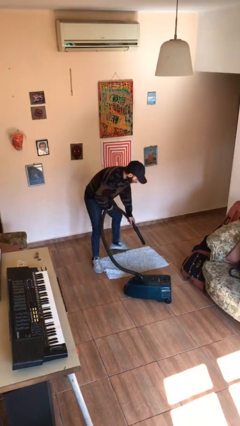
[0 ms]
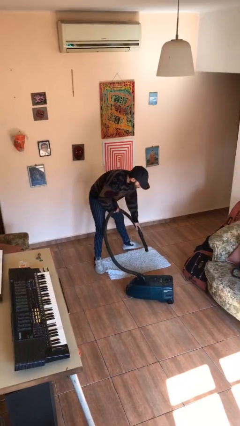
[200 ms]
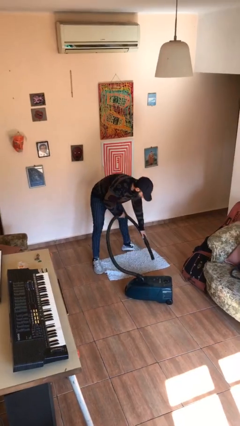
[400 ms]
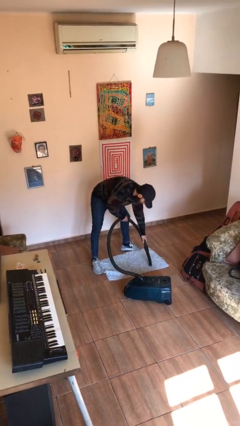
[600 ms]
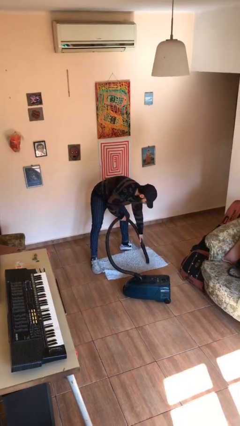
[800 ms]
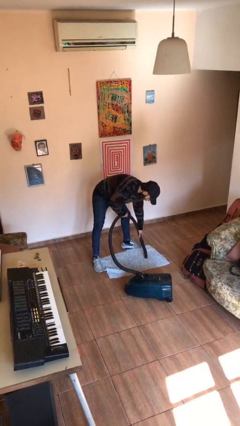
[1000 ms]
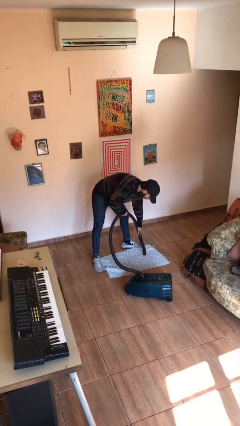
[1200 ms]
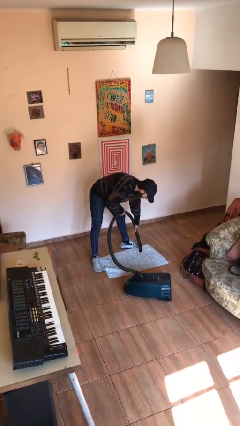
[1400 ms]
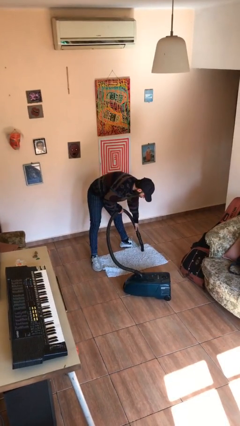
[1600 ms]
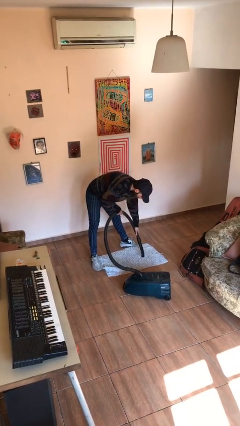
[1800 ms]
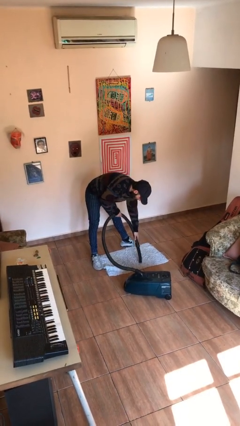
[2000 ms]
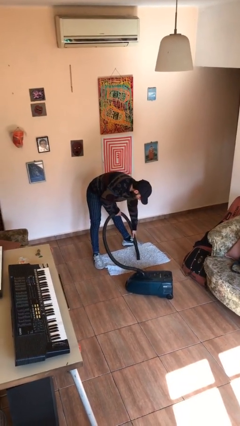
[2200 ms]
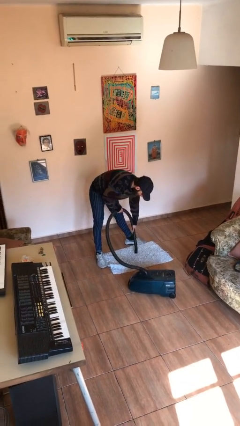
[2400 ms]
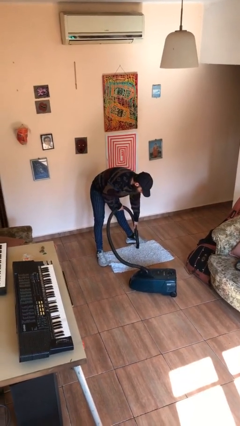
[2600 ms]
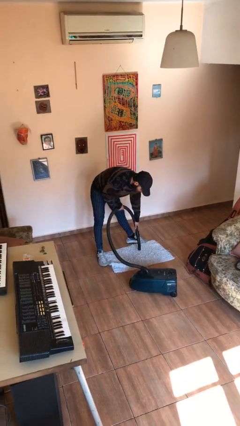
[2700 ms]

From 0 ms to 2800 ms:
person vacuums carpet

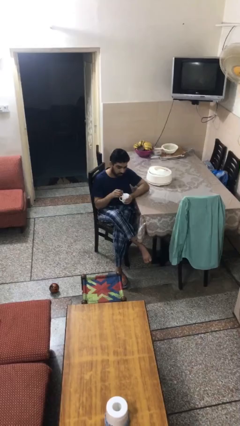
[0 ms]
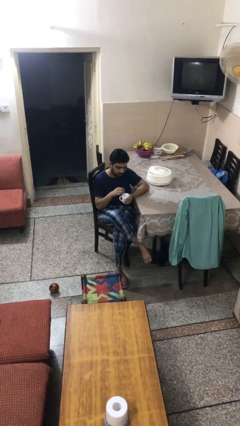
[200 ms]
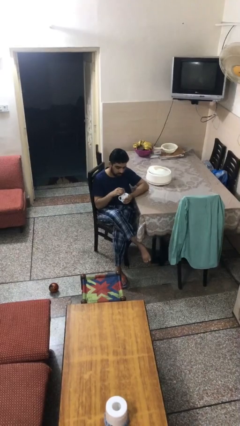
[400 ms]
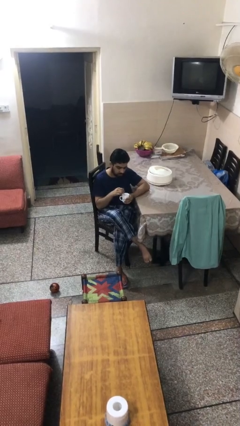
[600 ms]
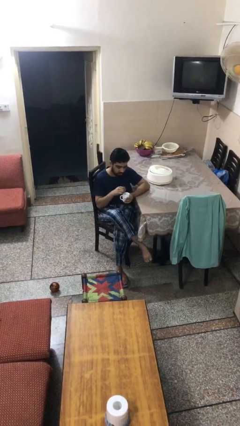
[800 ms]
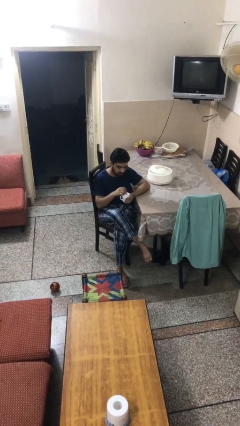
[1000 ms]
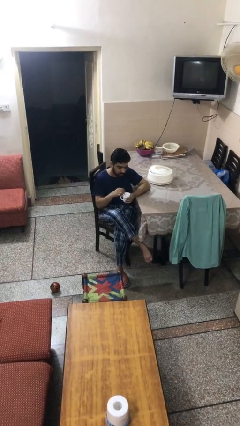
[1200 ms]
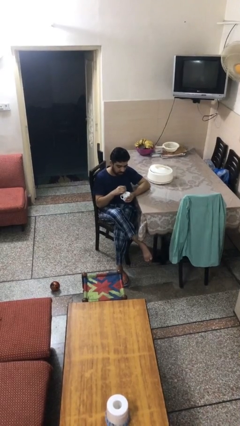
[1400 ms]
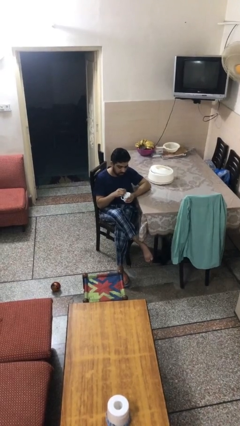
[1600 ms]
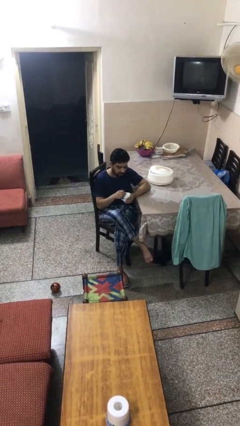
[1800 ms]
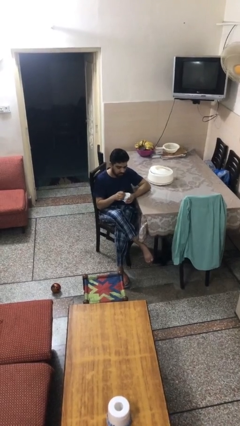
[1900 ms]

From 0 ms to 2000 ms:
person stirs mug

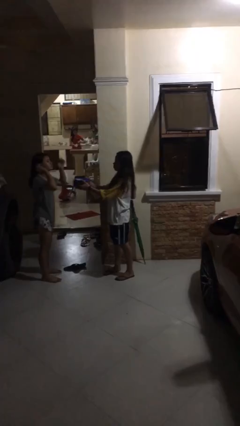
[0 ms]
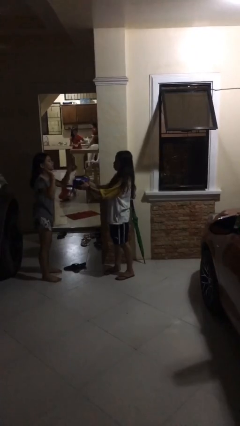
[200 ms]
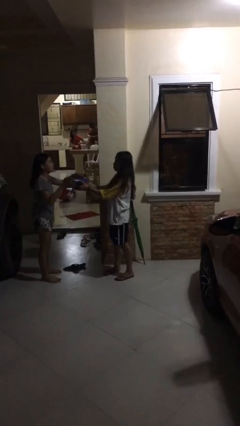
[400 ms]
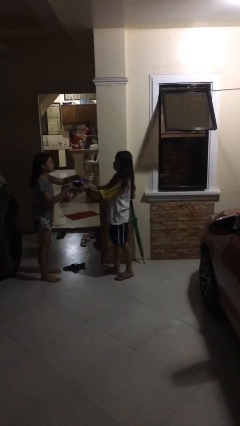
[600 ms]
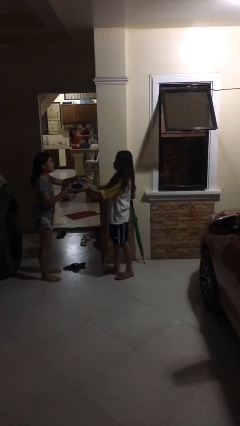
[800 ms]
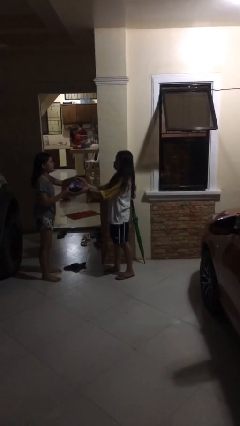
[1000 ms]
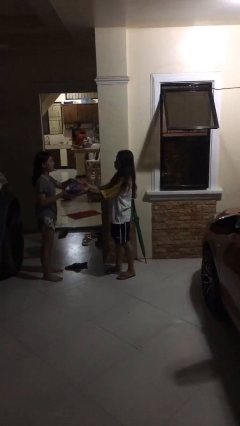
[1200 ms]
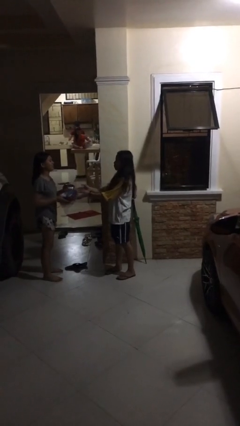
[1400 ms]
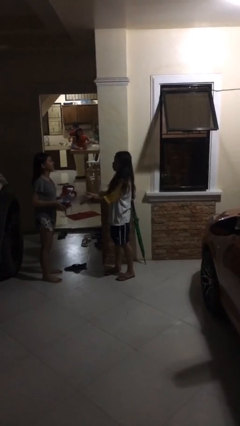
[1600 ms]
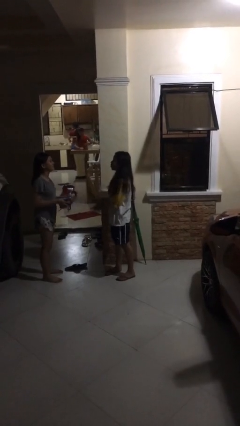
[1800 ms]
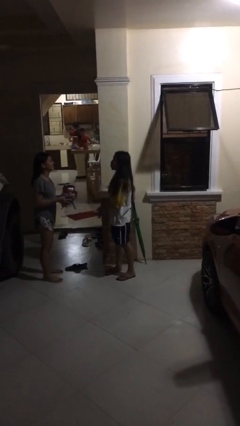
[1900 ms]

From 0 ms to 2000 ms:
person transfers object to person

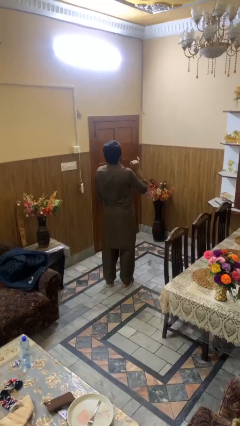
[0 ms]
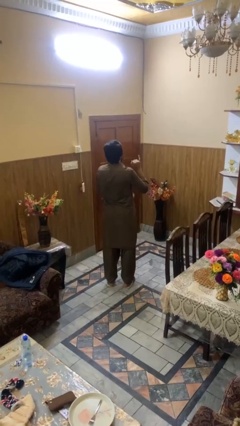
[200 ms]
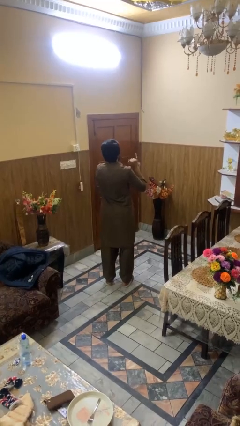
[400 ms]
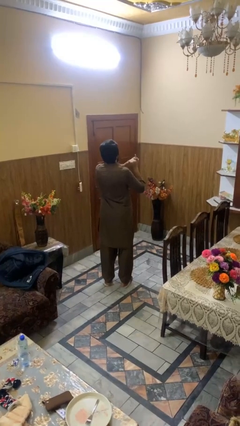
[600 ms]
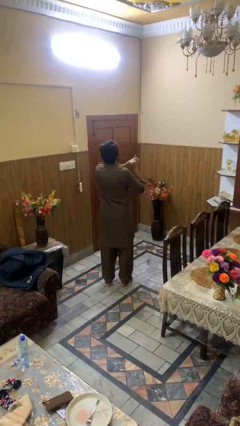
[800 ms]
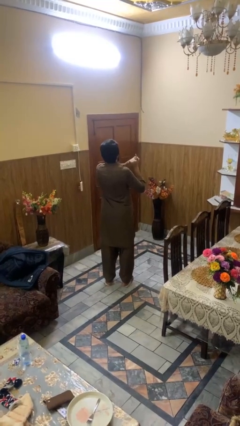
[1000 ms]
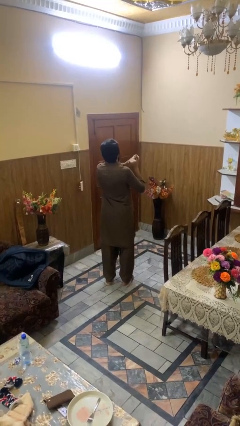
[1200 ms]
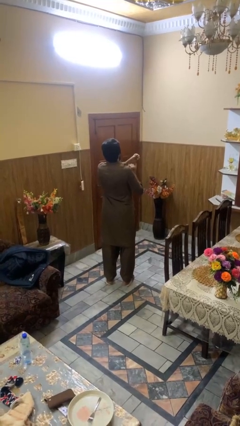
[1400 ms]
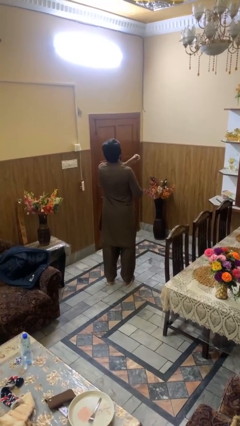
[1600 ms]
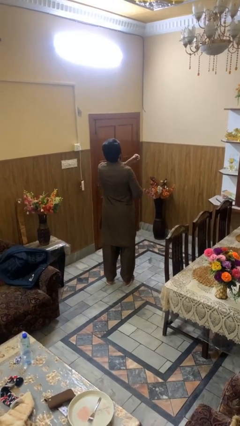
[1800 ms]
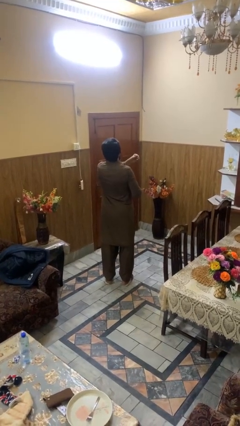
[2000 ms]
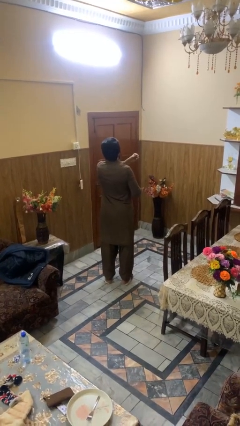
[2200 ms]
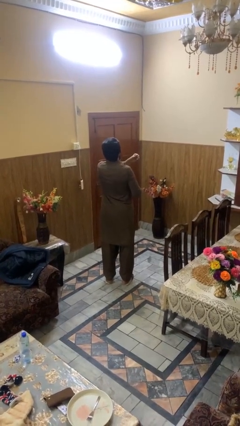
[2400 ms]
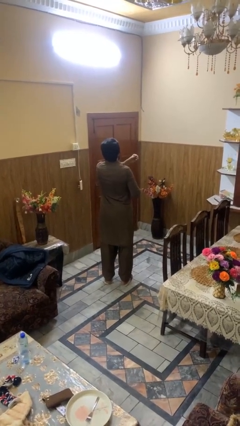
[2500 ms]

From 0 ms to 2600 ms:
person takes off ring

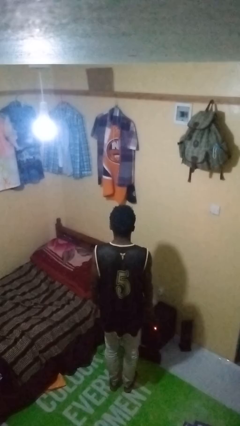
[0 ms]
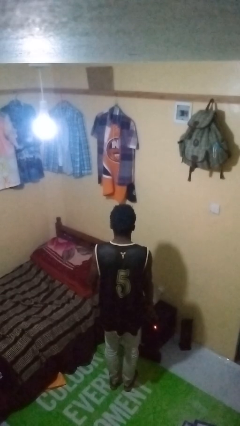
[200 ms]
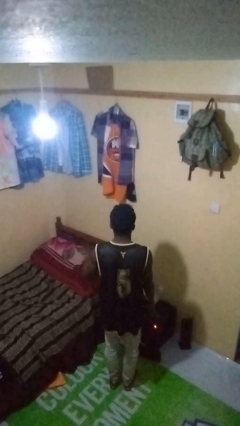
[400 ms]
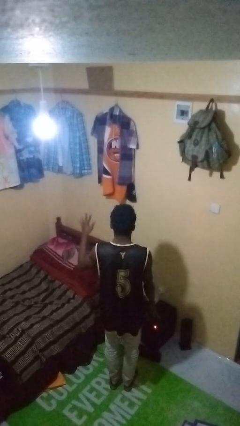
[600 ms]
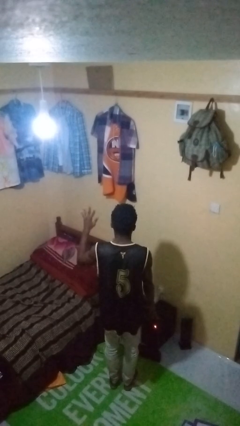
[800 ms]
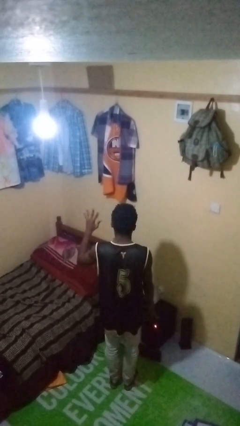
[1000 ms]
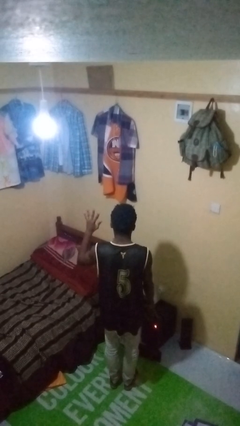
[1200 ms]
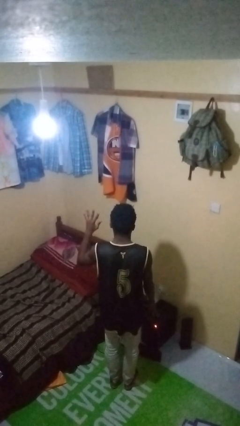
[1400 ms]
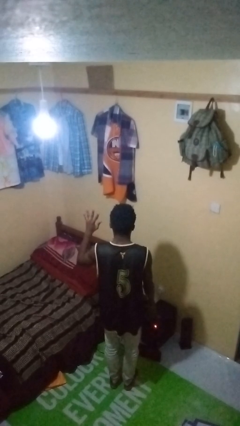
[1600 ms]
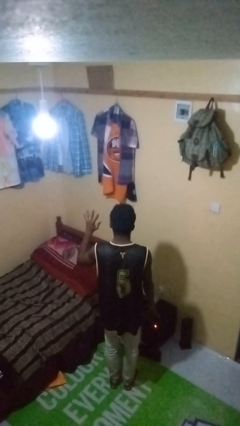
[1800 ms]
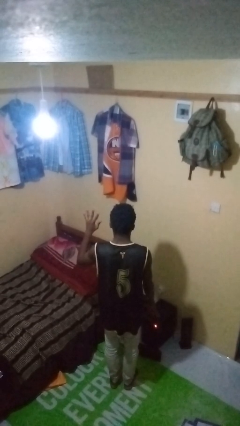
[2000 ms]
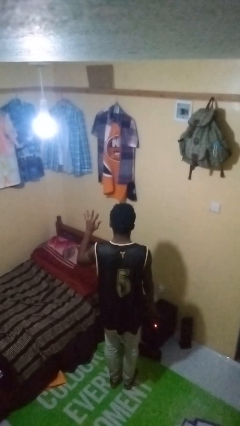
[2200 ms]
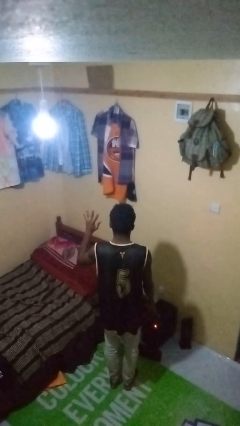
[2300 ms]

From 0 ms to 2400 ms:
person gestures number five

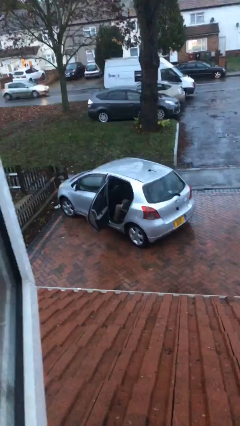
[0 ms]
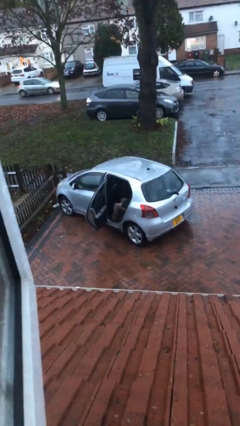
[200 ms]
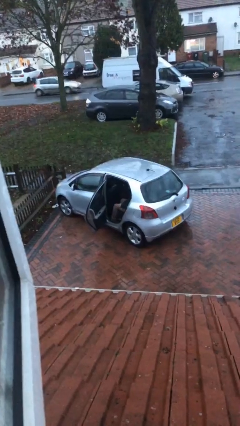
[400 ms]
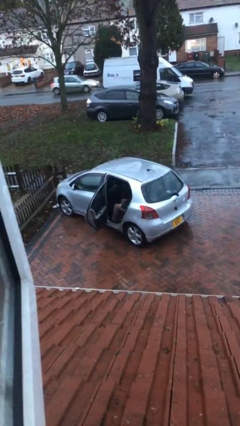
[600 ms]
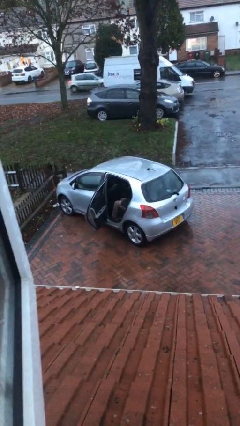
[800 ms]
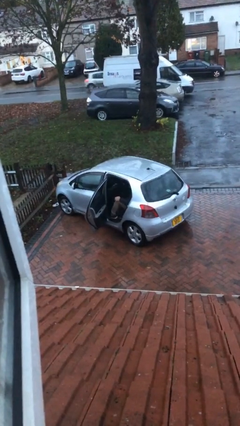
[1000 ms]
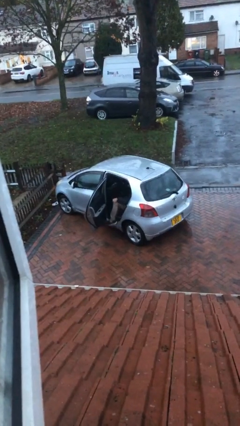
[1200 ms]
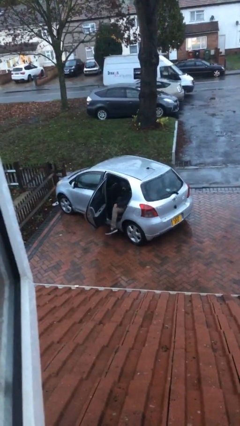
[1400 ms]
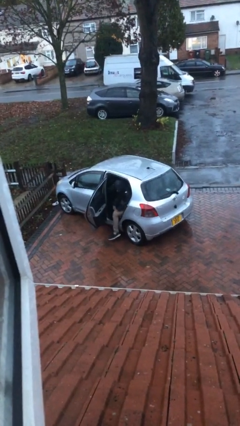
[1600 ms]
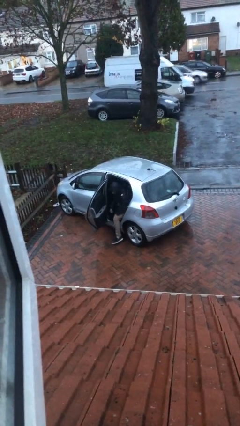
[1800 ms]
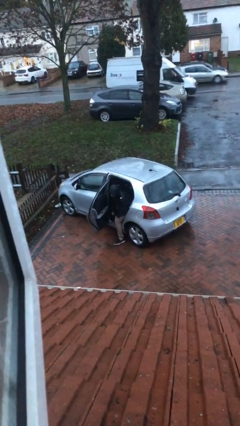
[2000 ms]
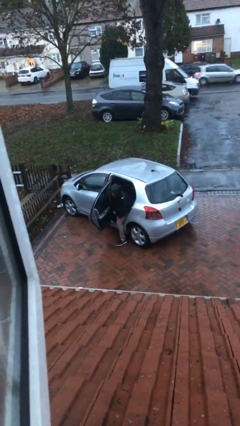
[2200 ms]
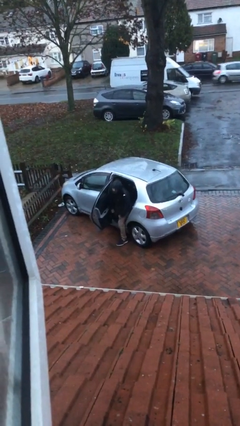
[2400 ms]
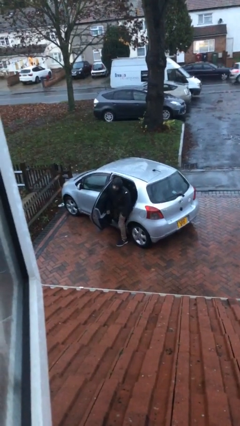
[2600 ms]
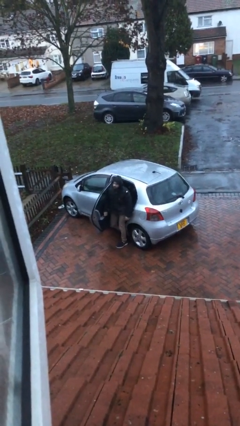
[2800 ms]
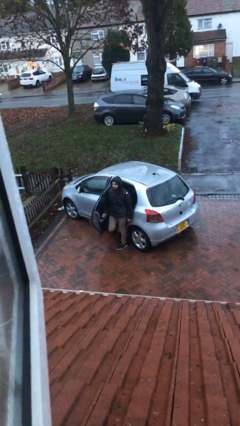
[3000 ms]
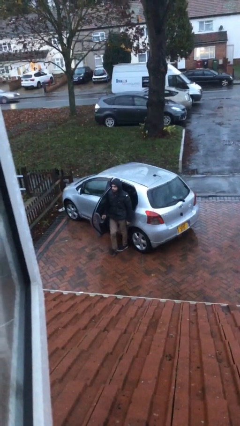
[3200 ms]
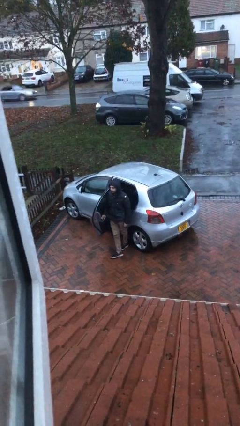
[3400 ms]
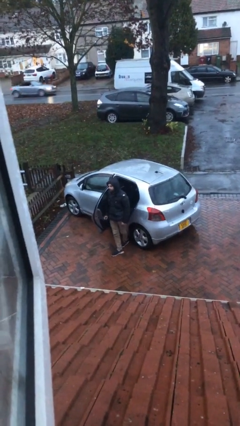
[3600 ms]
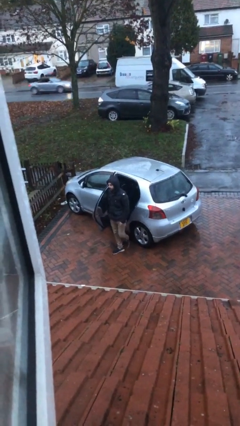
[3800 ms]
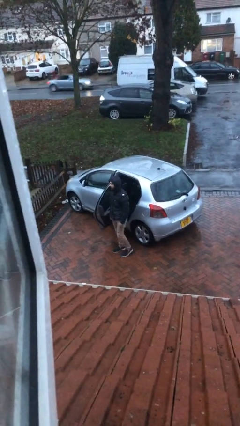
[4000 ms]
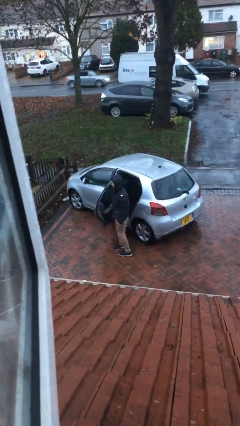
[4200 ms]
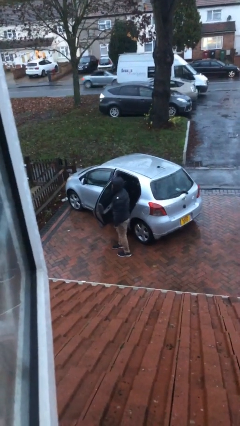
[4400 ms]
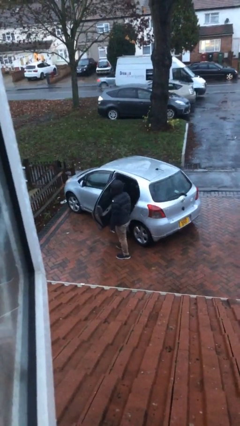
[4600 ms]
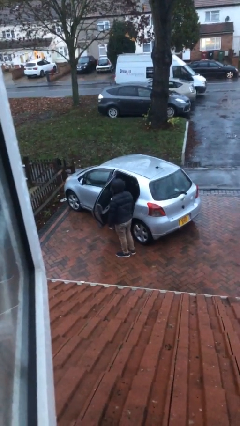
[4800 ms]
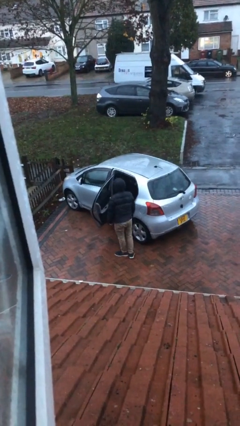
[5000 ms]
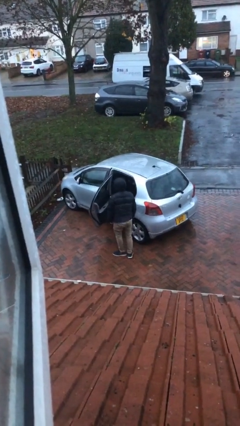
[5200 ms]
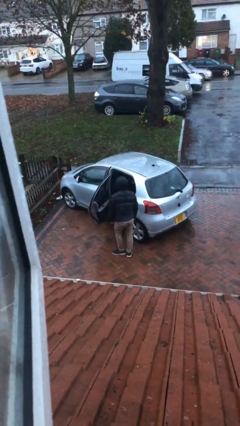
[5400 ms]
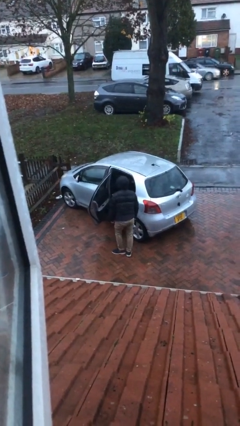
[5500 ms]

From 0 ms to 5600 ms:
person exits car

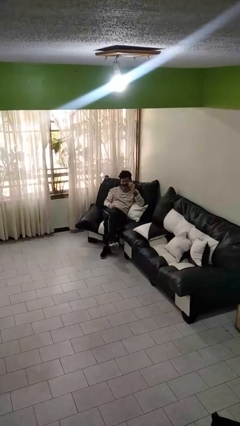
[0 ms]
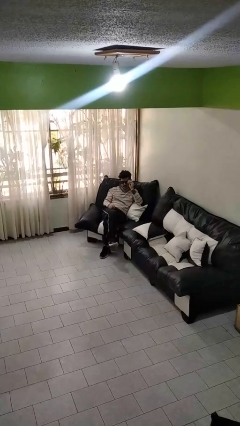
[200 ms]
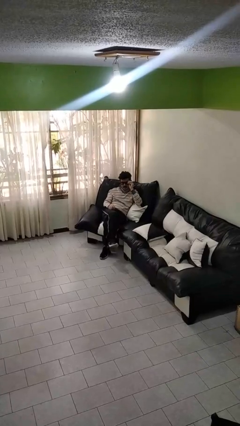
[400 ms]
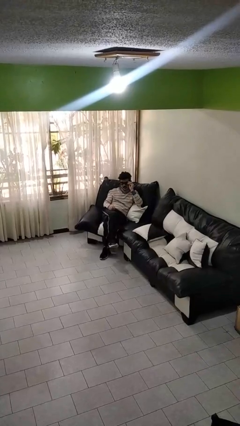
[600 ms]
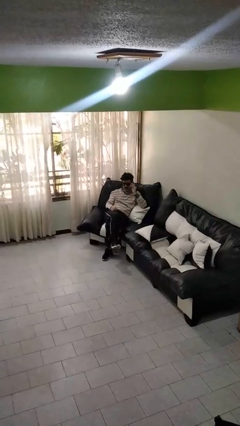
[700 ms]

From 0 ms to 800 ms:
person puts on sunglasses
